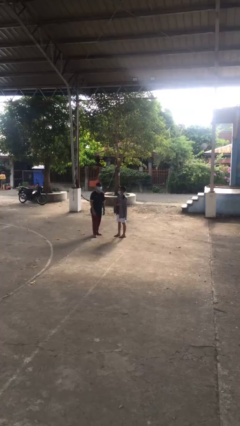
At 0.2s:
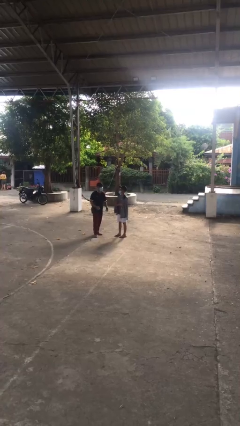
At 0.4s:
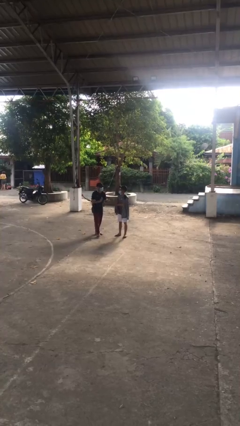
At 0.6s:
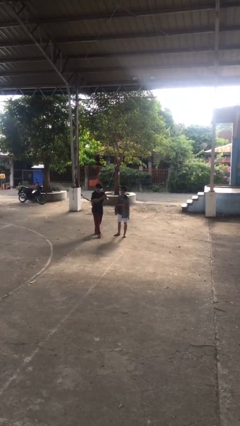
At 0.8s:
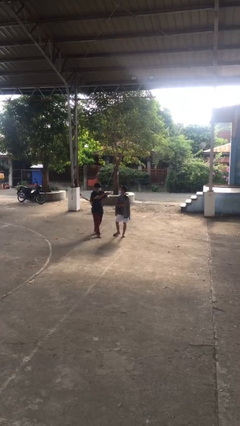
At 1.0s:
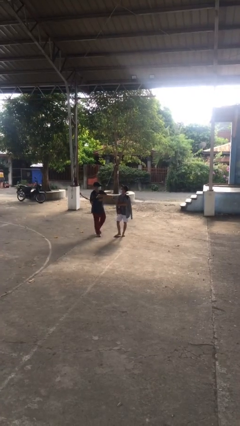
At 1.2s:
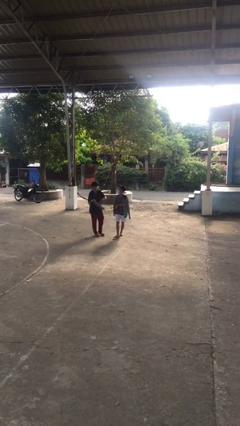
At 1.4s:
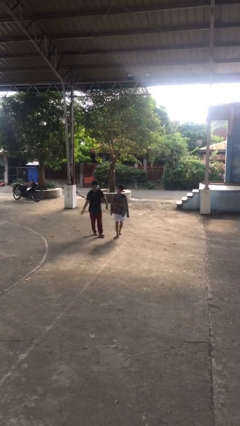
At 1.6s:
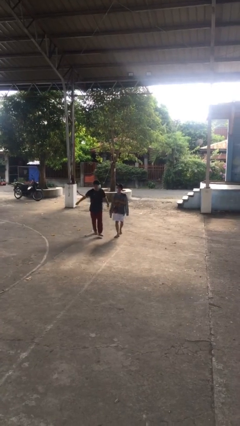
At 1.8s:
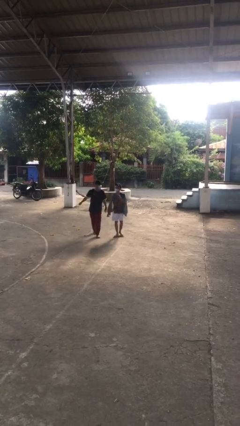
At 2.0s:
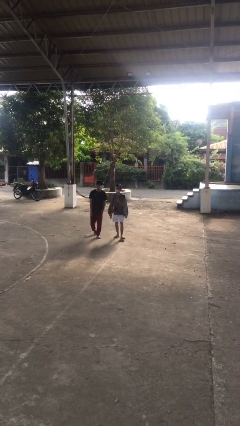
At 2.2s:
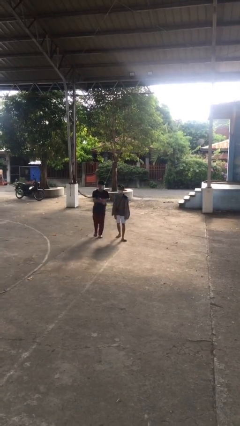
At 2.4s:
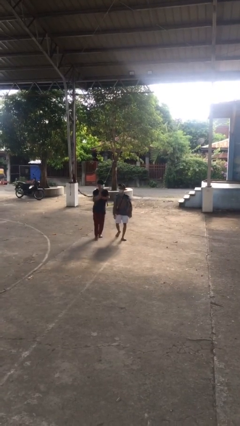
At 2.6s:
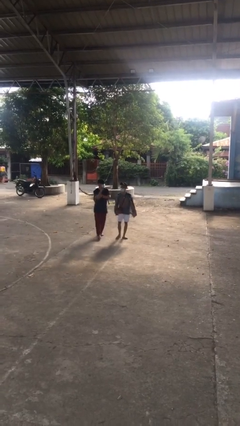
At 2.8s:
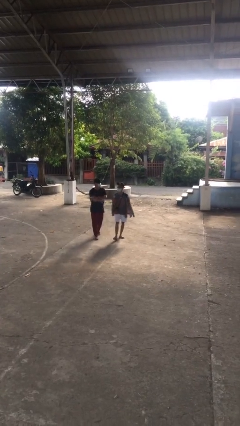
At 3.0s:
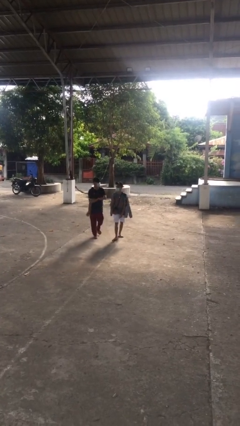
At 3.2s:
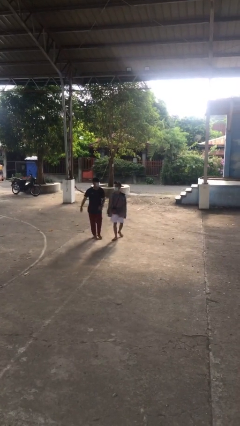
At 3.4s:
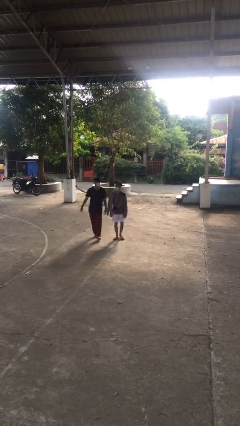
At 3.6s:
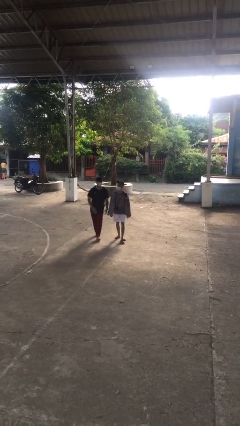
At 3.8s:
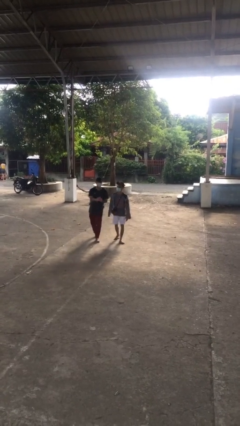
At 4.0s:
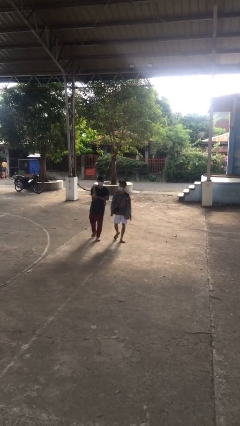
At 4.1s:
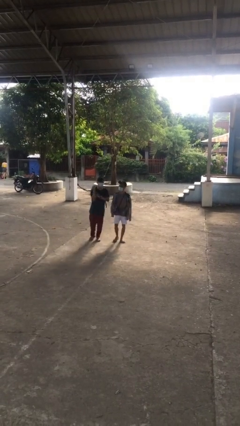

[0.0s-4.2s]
person talks to person

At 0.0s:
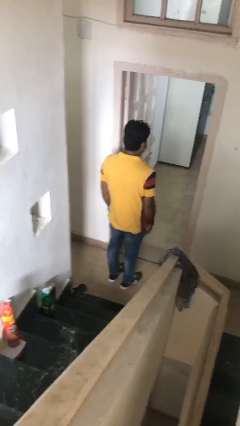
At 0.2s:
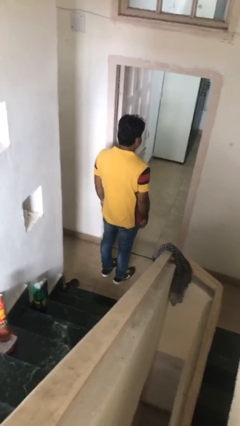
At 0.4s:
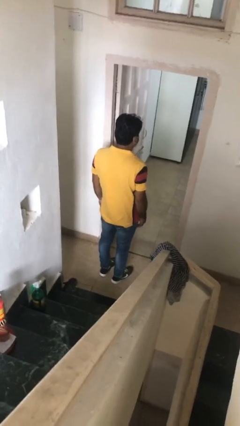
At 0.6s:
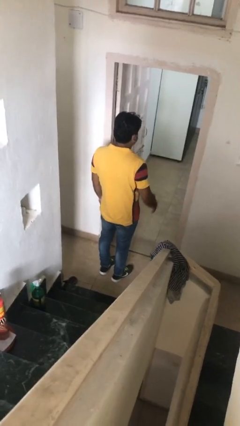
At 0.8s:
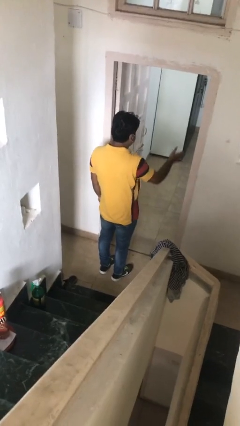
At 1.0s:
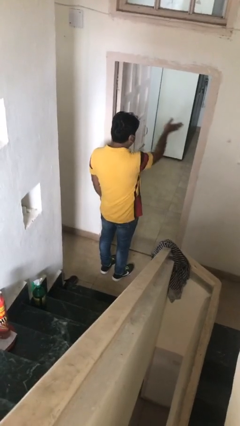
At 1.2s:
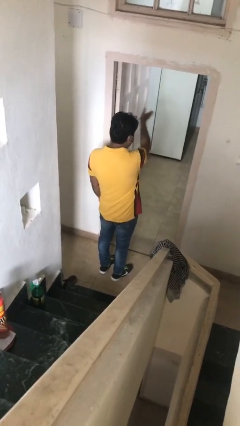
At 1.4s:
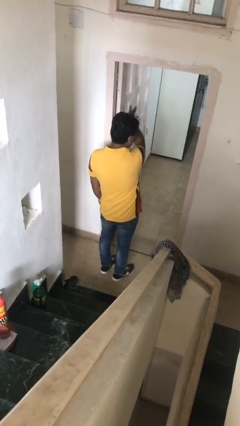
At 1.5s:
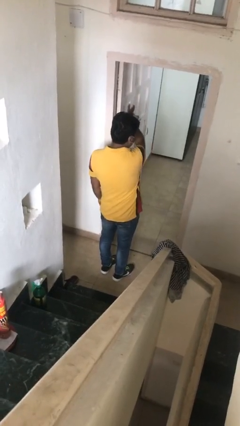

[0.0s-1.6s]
person gestures swipe left

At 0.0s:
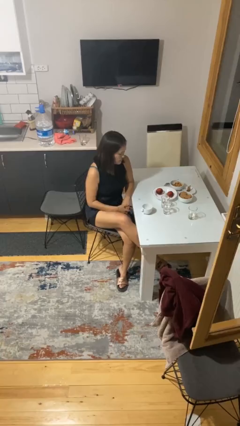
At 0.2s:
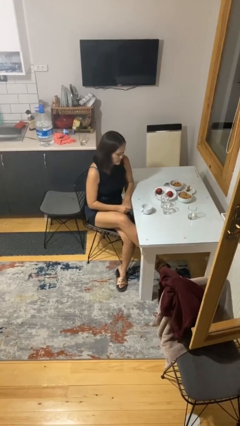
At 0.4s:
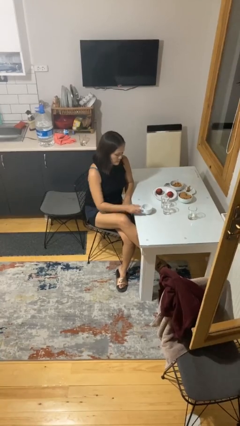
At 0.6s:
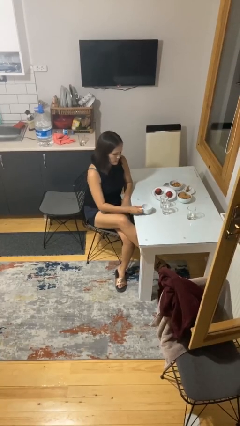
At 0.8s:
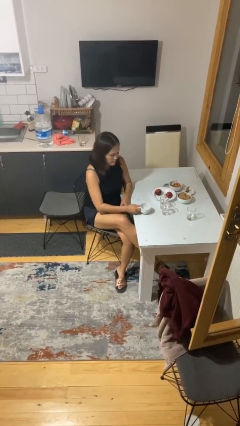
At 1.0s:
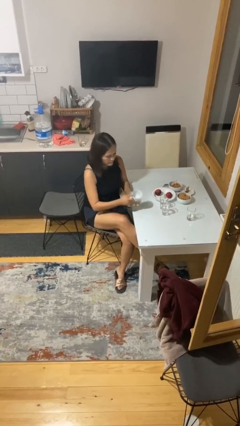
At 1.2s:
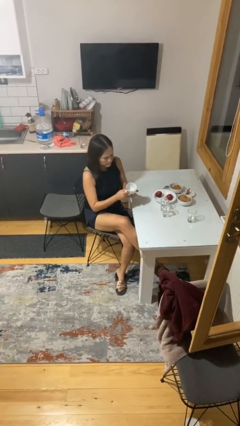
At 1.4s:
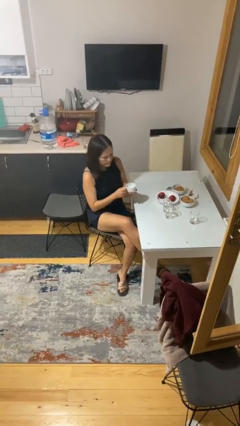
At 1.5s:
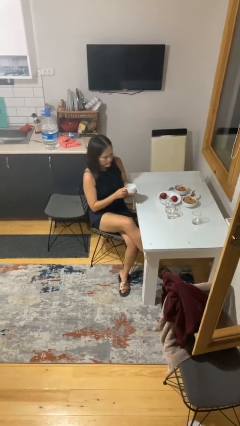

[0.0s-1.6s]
person picks up object from table

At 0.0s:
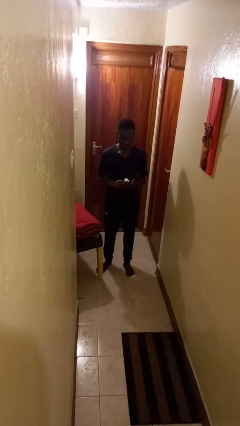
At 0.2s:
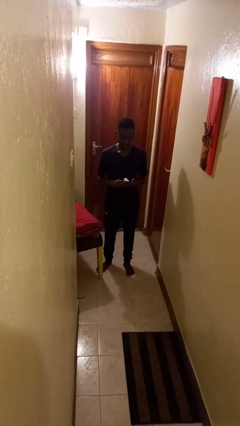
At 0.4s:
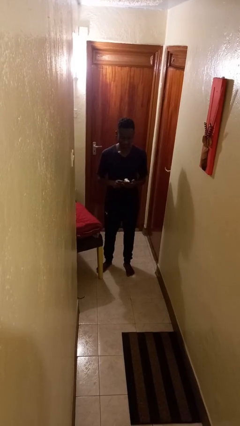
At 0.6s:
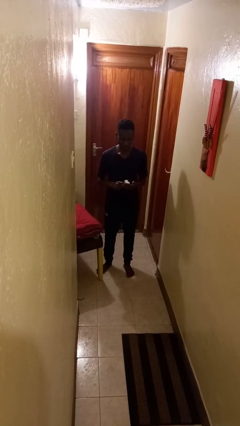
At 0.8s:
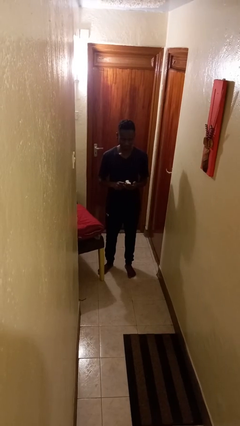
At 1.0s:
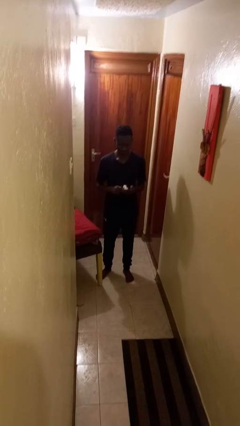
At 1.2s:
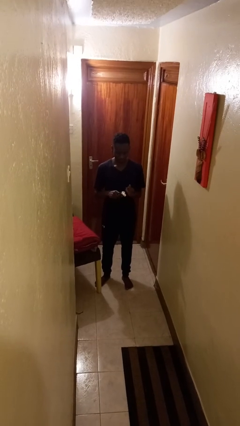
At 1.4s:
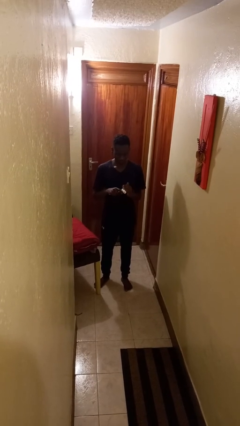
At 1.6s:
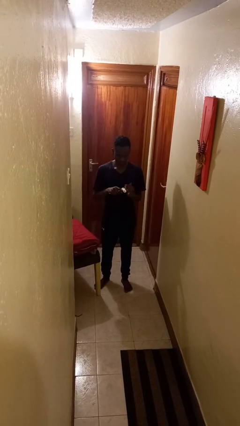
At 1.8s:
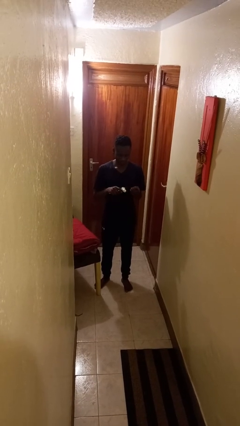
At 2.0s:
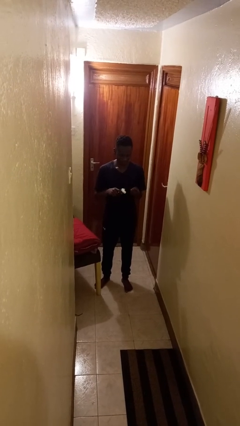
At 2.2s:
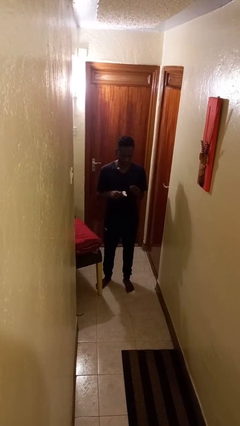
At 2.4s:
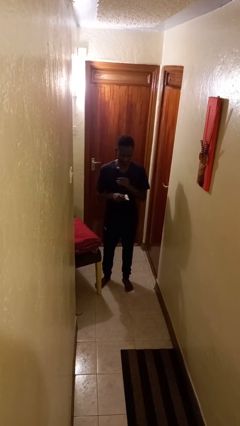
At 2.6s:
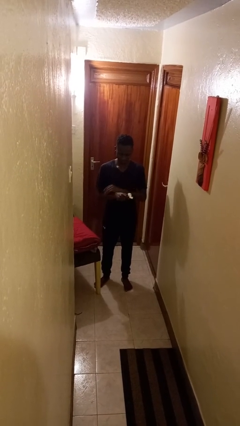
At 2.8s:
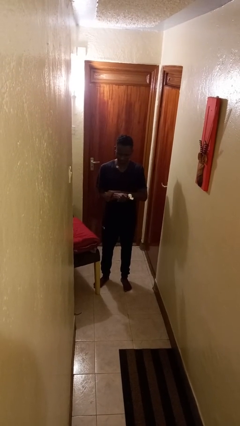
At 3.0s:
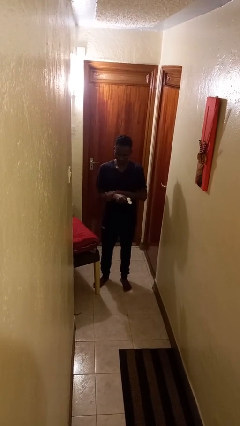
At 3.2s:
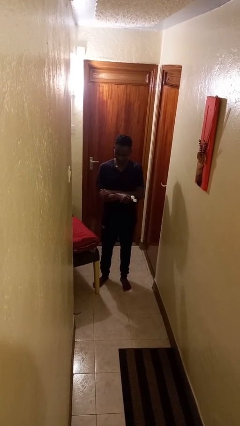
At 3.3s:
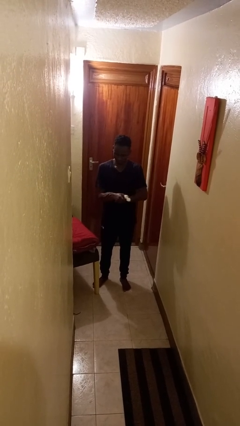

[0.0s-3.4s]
person applies sunscreen

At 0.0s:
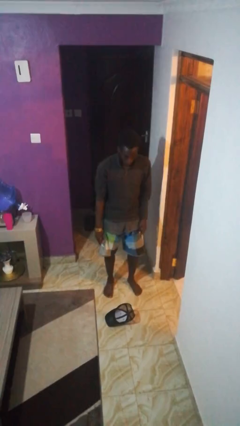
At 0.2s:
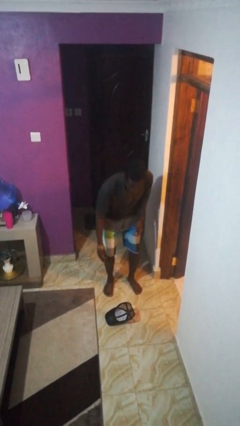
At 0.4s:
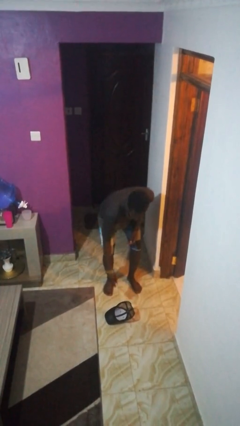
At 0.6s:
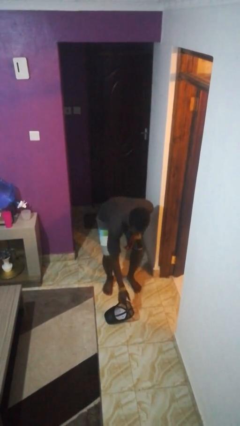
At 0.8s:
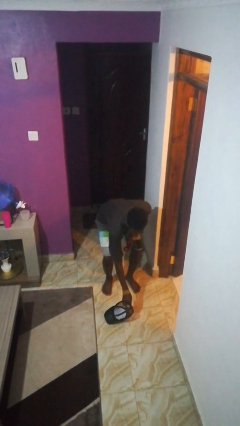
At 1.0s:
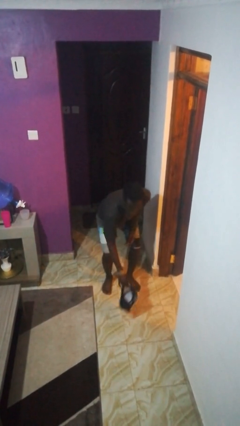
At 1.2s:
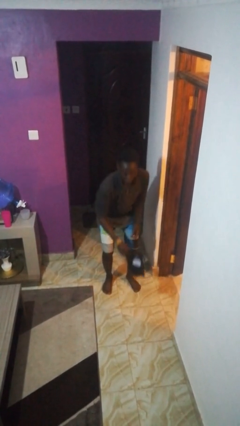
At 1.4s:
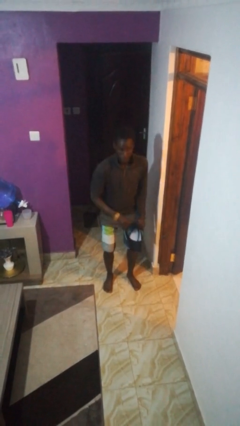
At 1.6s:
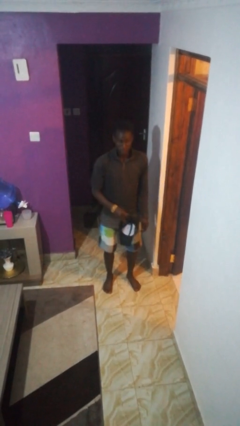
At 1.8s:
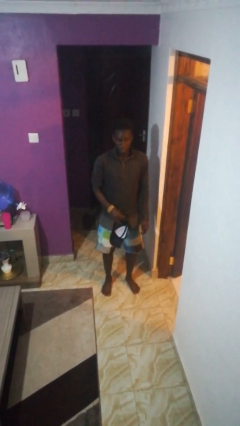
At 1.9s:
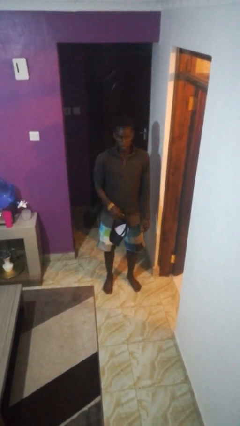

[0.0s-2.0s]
person picks up object from floor

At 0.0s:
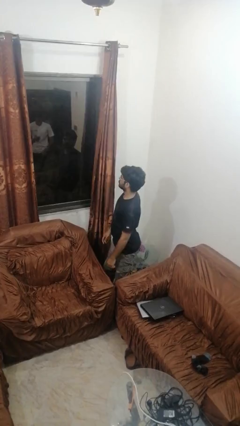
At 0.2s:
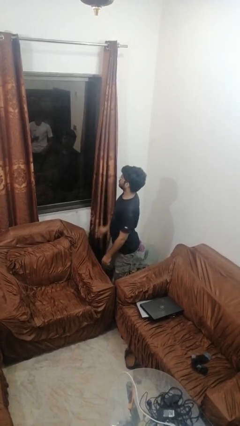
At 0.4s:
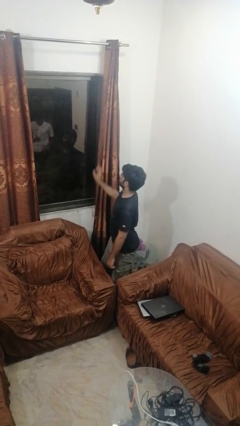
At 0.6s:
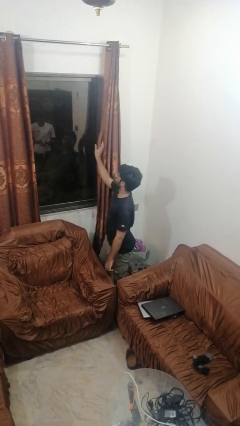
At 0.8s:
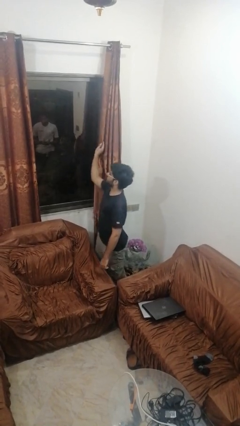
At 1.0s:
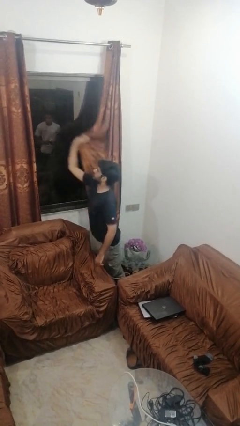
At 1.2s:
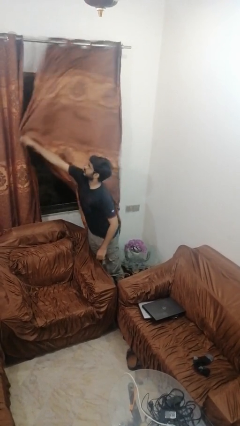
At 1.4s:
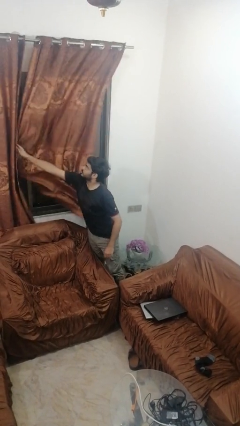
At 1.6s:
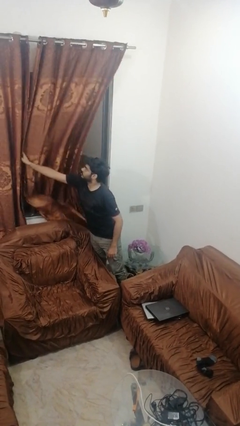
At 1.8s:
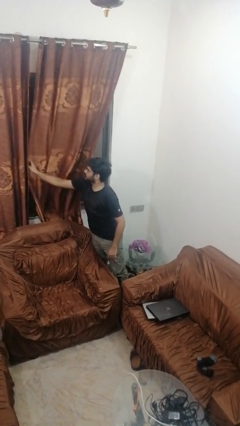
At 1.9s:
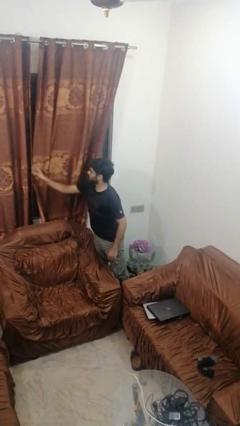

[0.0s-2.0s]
person closes curtains

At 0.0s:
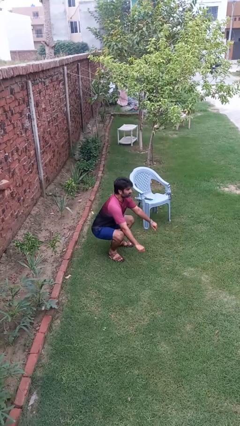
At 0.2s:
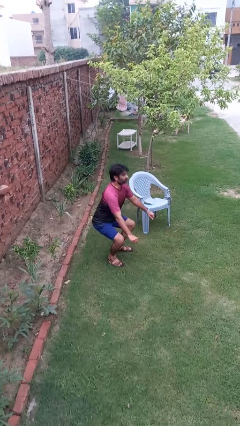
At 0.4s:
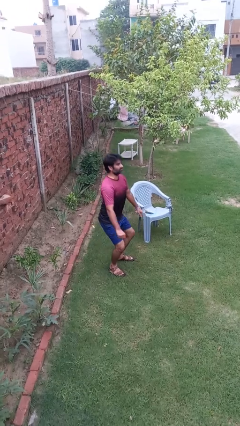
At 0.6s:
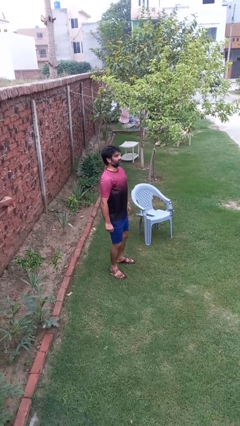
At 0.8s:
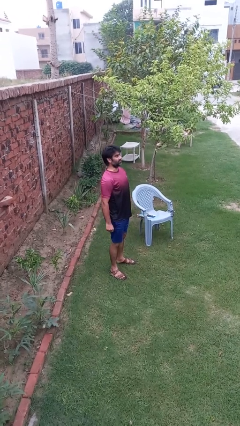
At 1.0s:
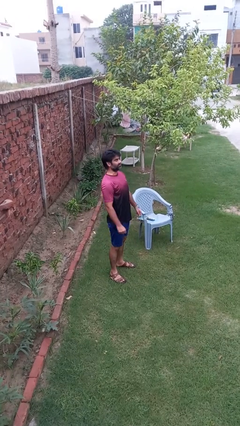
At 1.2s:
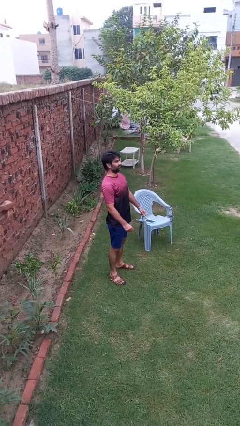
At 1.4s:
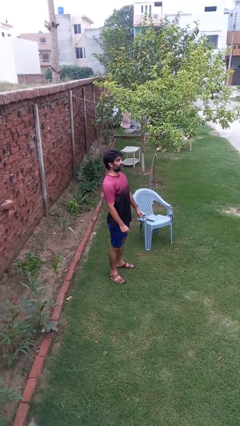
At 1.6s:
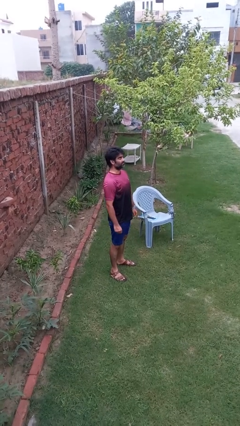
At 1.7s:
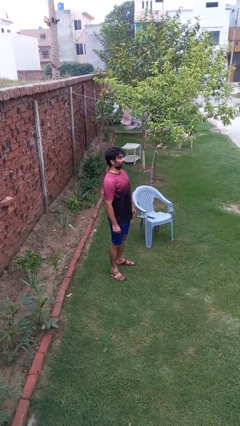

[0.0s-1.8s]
person stands up

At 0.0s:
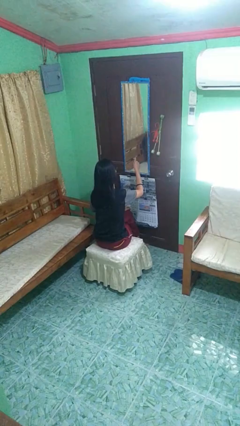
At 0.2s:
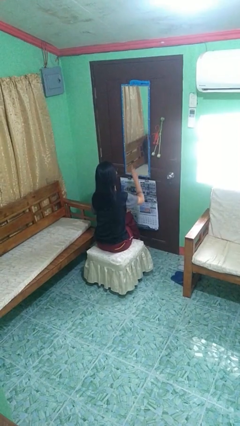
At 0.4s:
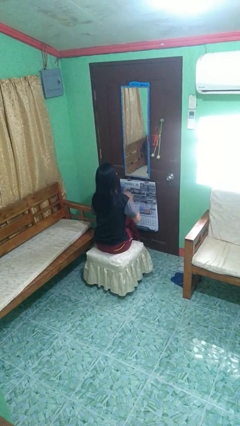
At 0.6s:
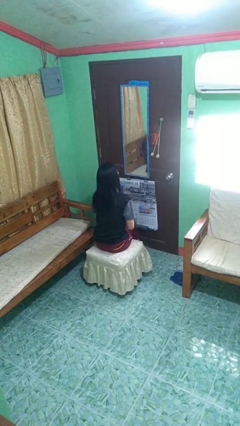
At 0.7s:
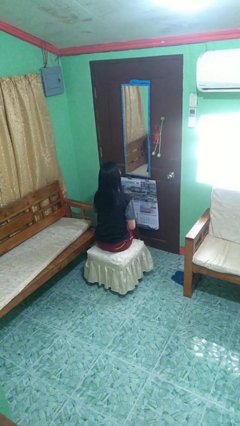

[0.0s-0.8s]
person gestures thumbs up
